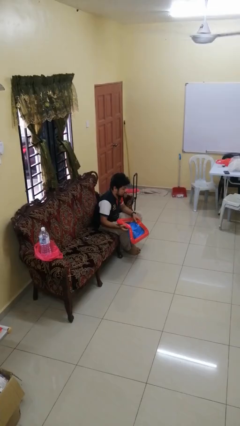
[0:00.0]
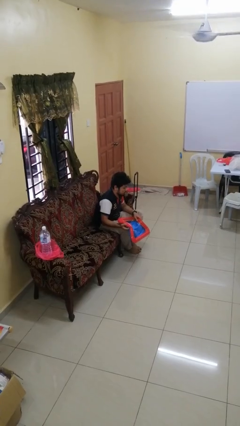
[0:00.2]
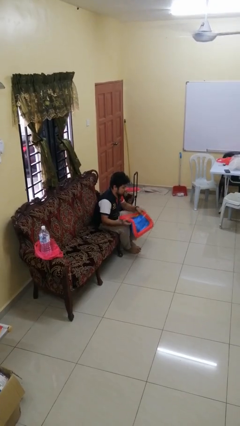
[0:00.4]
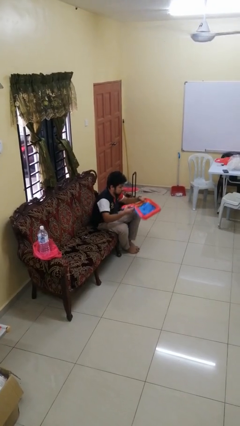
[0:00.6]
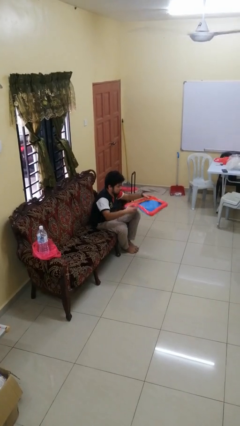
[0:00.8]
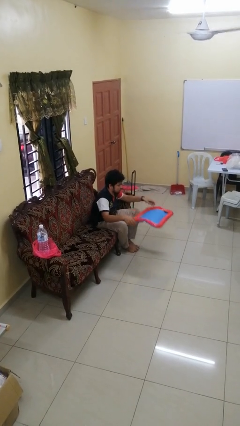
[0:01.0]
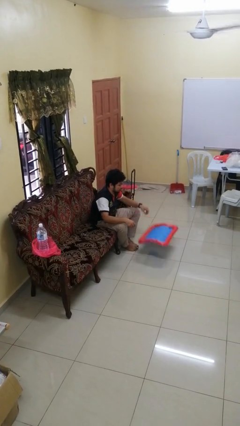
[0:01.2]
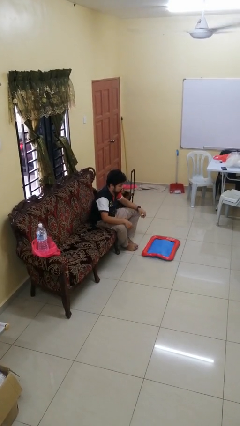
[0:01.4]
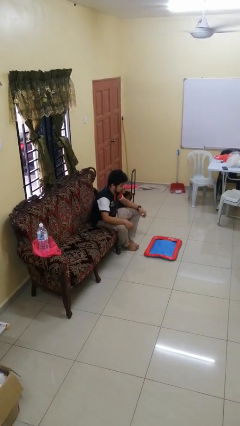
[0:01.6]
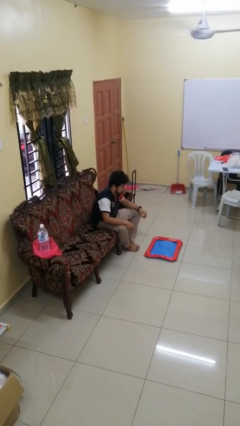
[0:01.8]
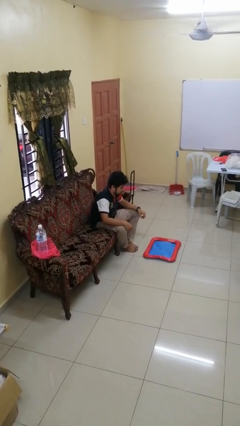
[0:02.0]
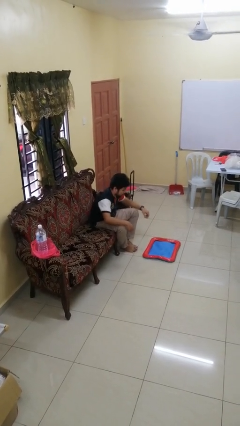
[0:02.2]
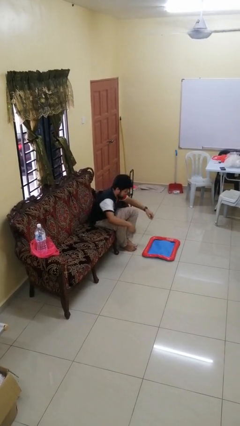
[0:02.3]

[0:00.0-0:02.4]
person drops object

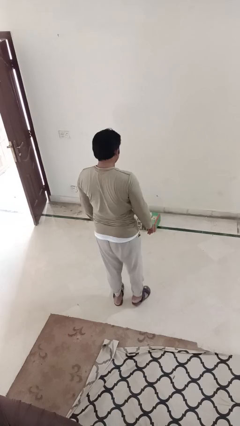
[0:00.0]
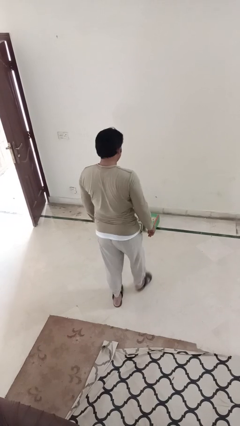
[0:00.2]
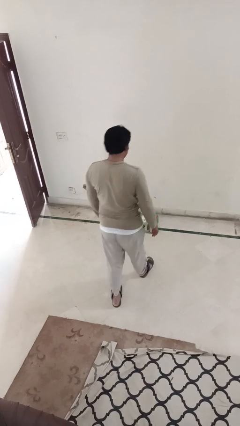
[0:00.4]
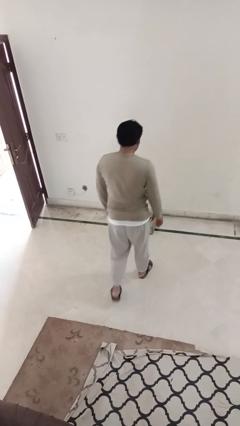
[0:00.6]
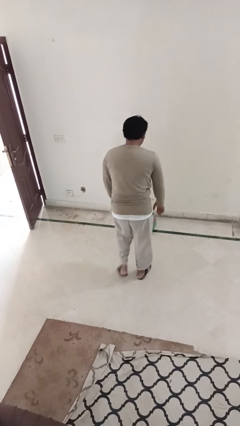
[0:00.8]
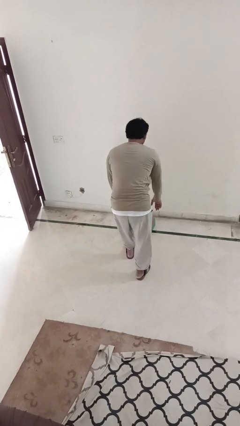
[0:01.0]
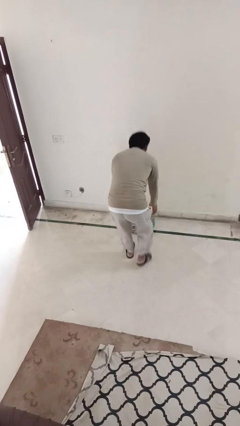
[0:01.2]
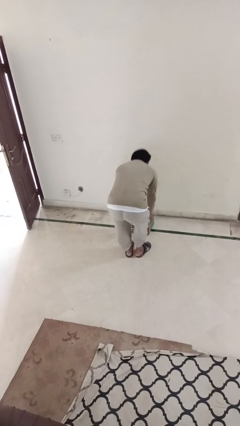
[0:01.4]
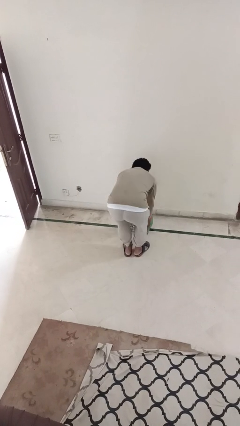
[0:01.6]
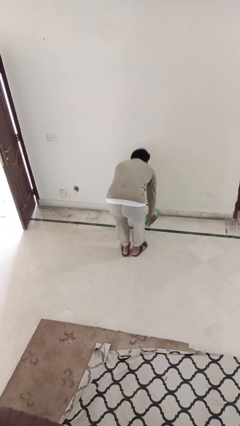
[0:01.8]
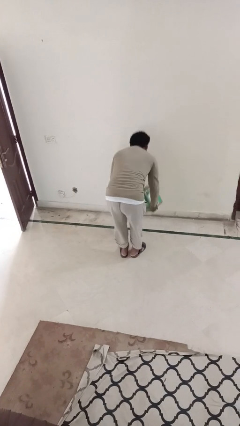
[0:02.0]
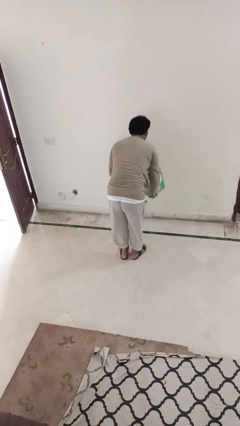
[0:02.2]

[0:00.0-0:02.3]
person picks up object from floor

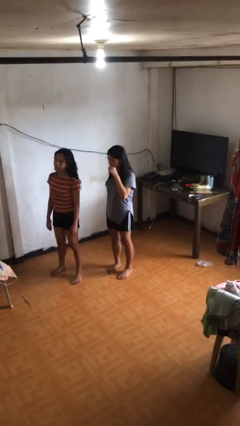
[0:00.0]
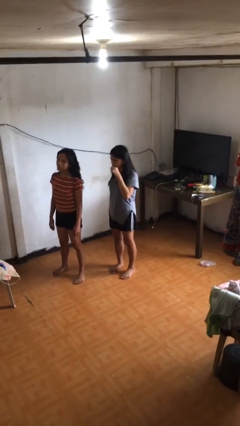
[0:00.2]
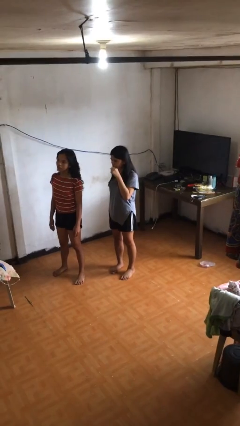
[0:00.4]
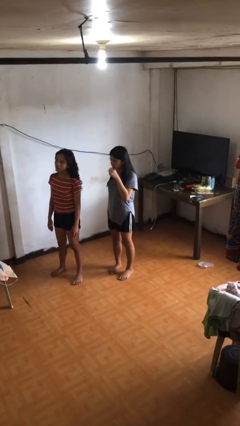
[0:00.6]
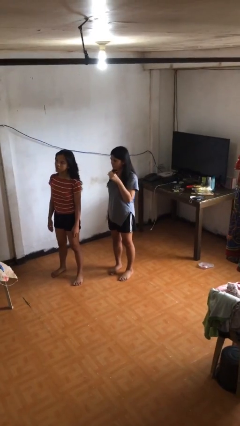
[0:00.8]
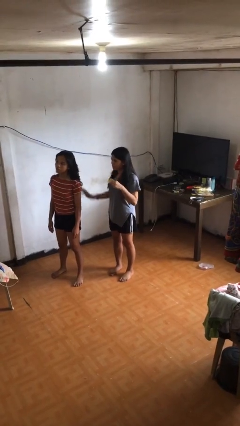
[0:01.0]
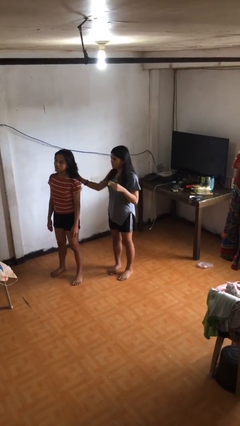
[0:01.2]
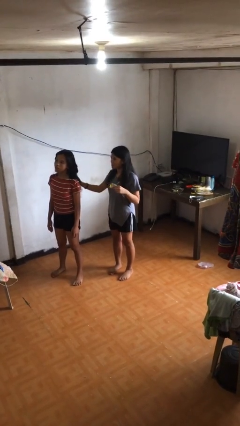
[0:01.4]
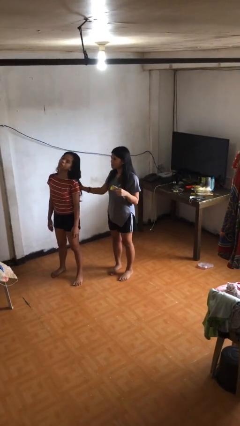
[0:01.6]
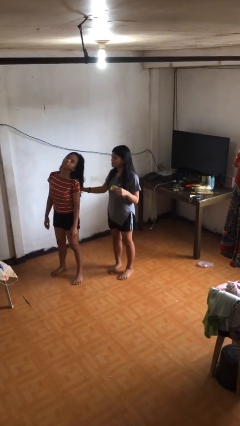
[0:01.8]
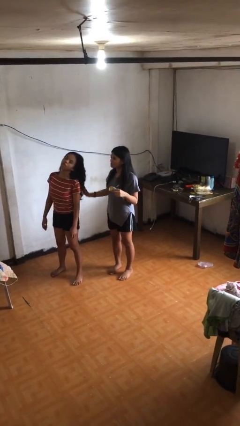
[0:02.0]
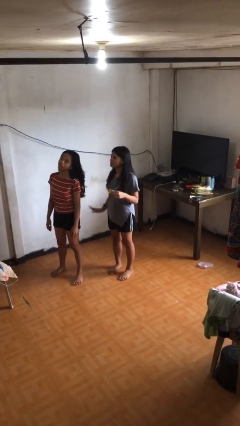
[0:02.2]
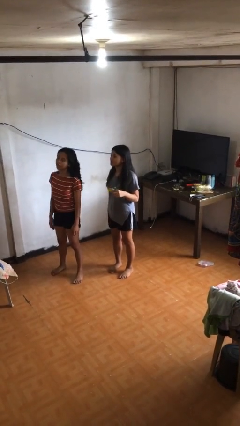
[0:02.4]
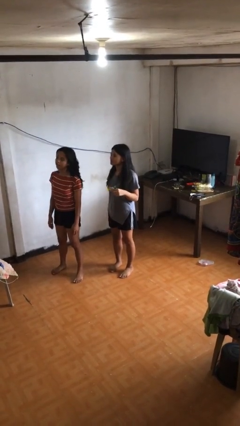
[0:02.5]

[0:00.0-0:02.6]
person grabs person by hair

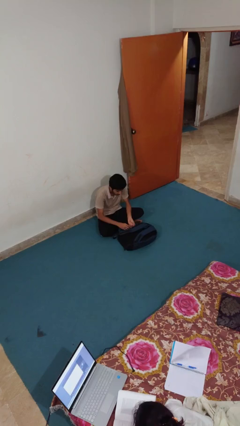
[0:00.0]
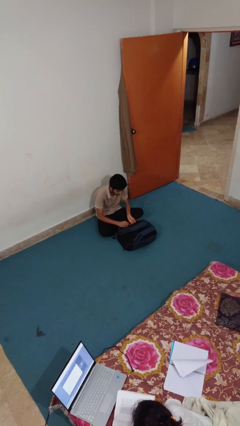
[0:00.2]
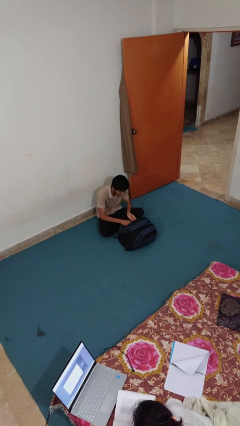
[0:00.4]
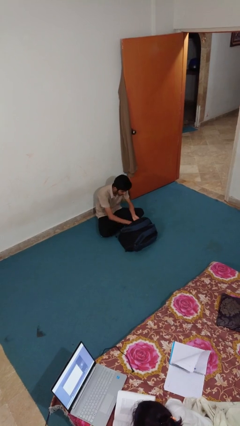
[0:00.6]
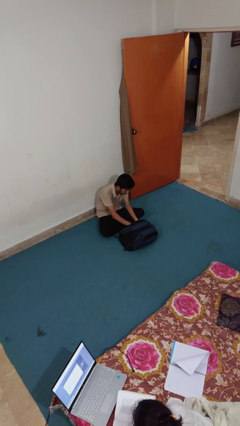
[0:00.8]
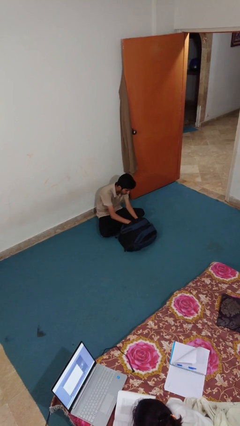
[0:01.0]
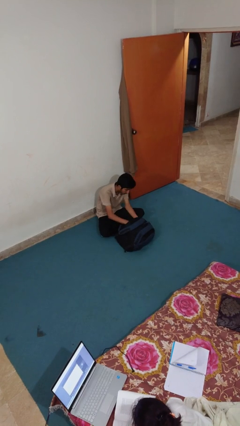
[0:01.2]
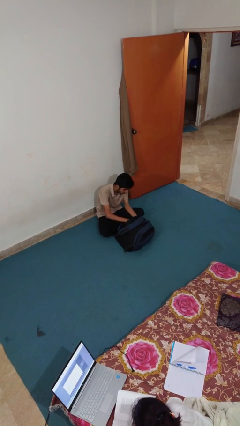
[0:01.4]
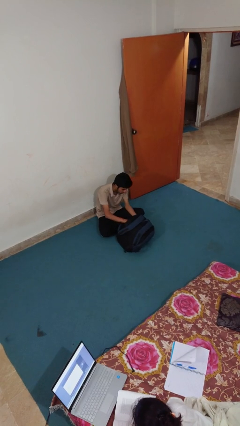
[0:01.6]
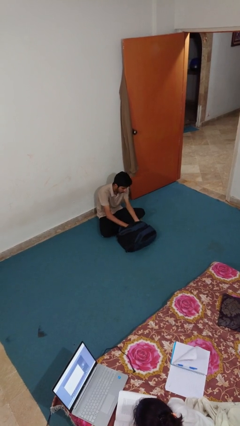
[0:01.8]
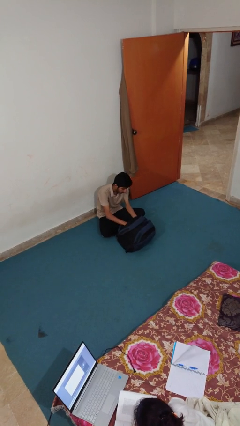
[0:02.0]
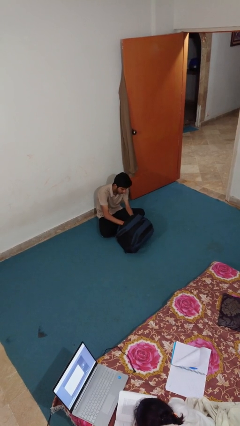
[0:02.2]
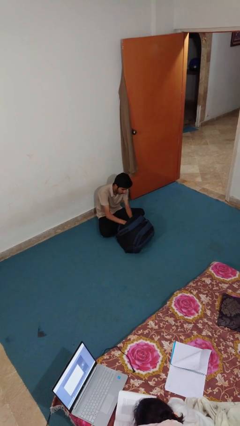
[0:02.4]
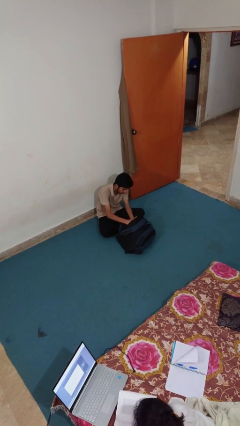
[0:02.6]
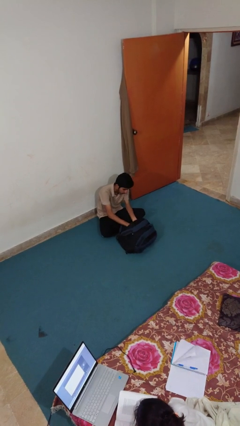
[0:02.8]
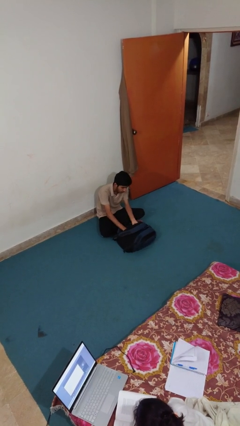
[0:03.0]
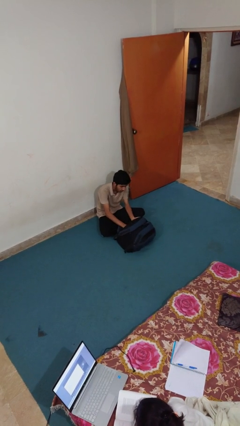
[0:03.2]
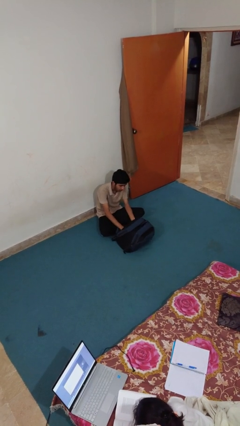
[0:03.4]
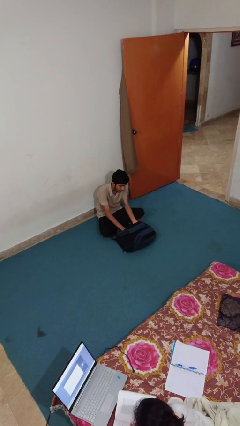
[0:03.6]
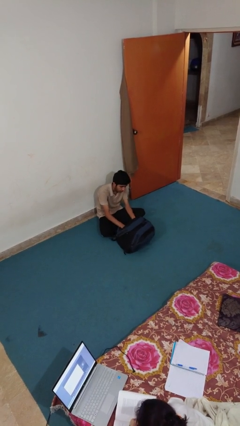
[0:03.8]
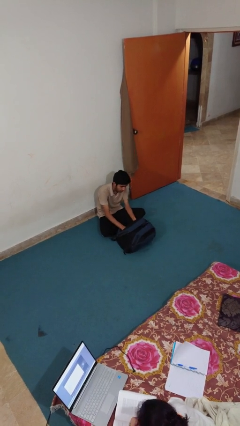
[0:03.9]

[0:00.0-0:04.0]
person sweeps floor

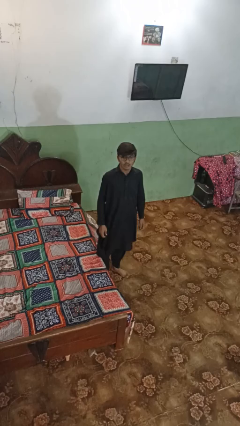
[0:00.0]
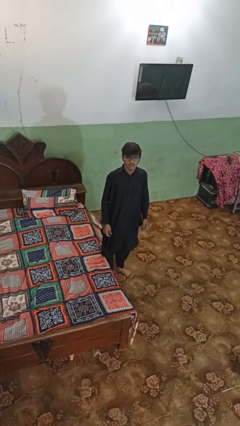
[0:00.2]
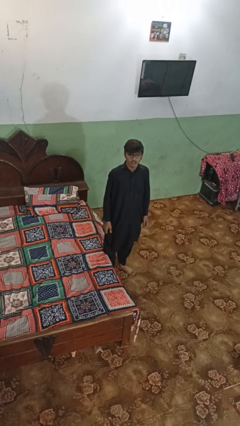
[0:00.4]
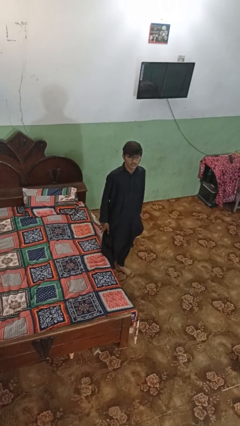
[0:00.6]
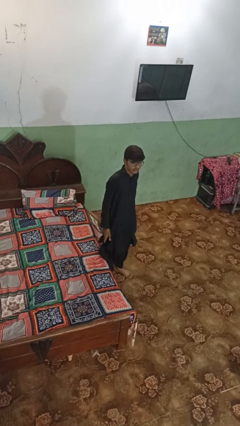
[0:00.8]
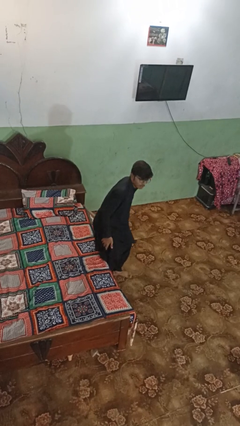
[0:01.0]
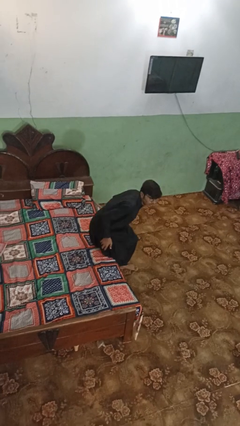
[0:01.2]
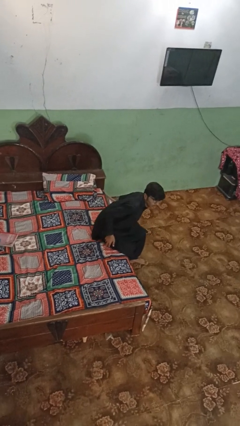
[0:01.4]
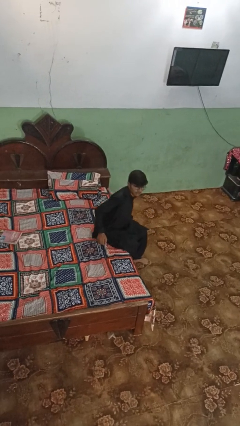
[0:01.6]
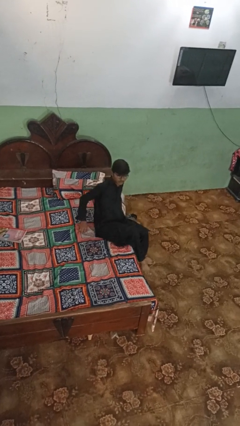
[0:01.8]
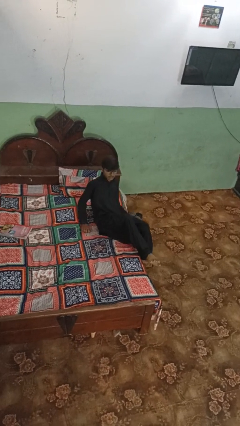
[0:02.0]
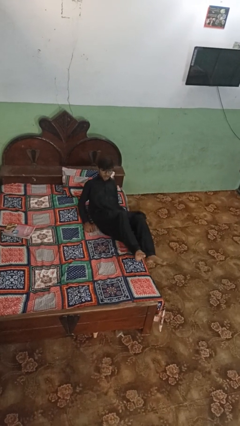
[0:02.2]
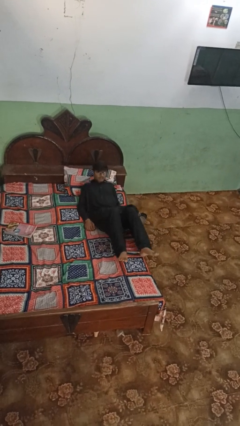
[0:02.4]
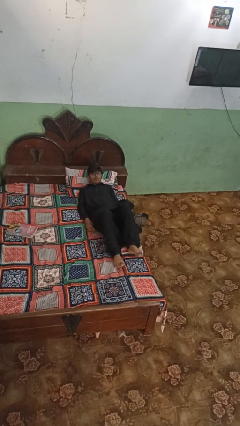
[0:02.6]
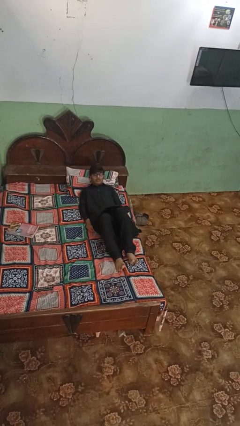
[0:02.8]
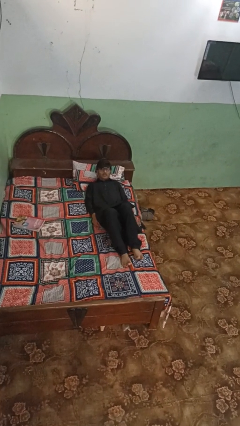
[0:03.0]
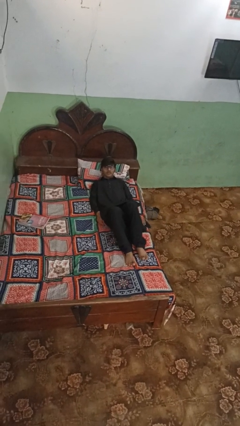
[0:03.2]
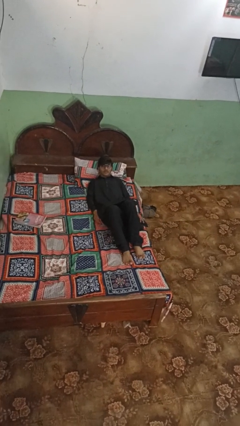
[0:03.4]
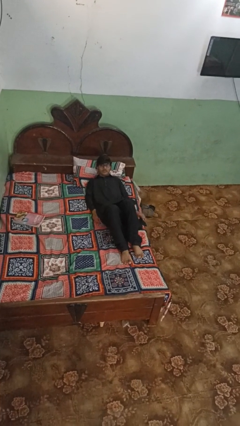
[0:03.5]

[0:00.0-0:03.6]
person lies down on bed

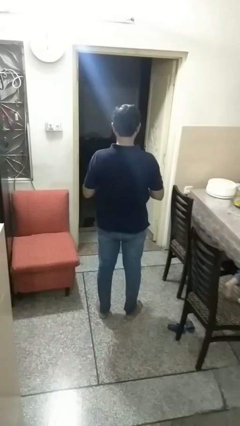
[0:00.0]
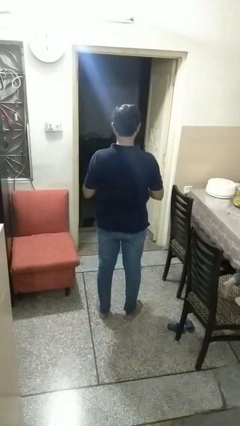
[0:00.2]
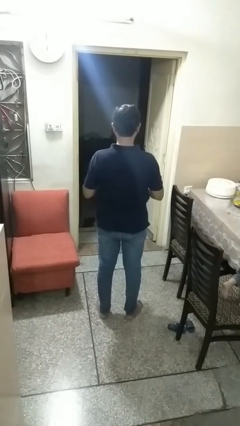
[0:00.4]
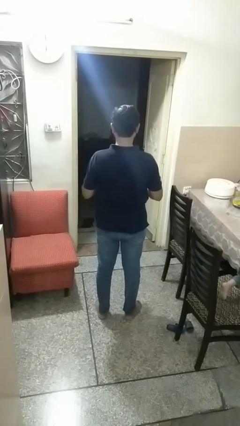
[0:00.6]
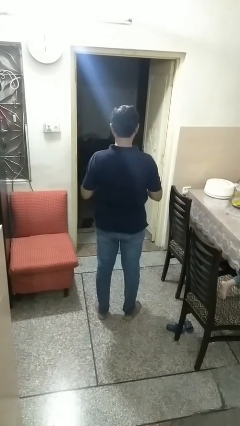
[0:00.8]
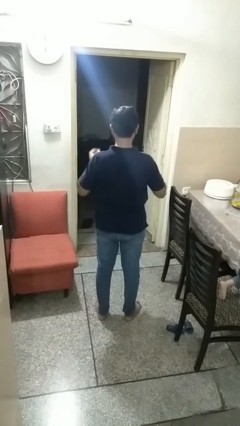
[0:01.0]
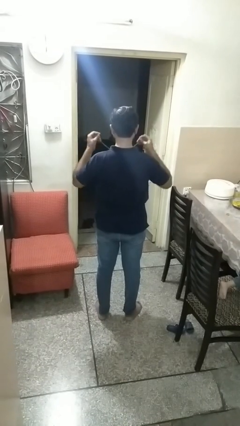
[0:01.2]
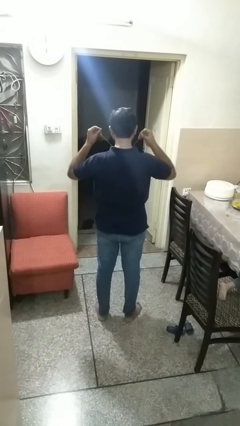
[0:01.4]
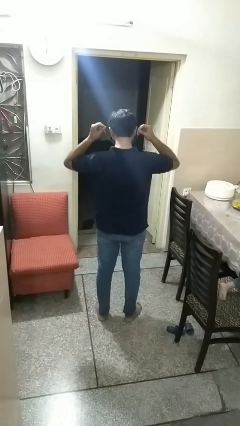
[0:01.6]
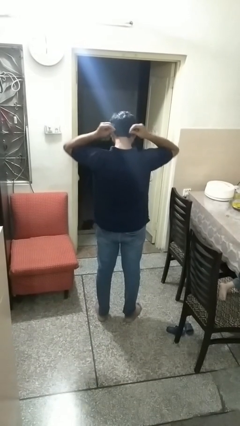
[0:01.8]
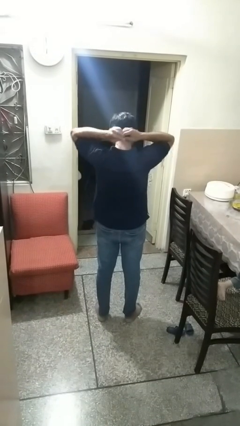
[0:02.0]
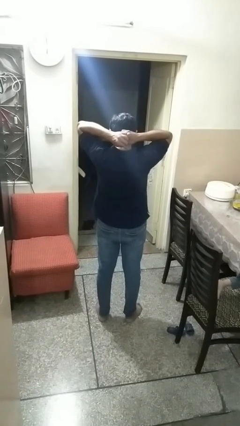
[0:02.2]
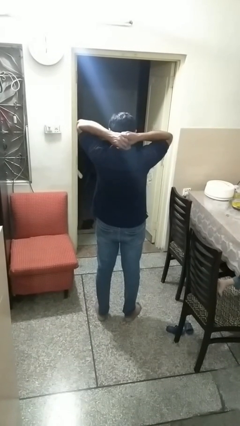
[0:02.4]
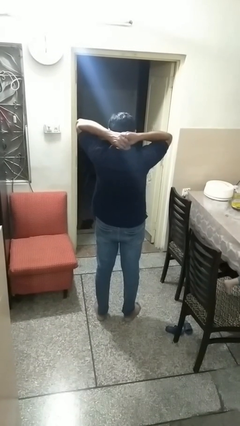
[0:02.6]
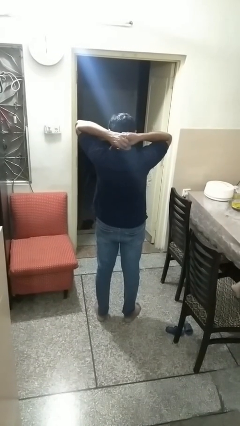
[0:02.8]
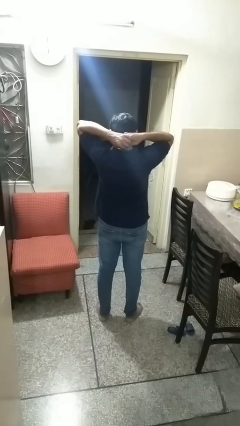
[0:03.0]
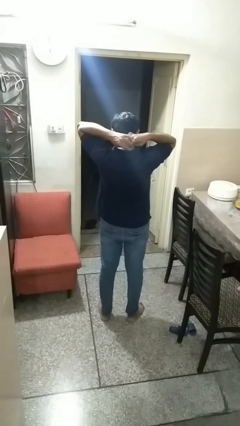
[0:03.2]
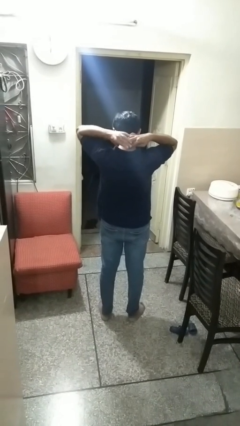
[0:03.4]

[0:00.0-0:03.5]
person puts on necklace
